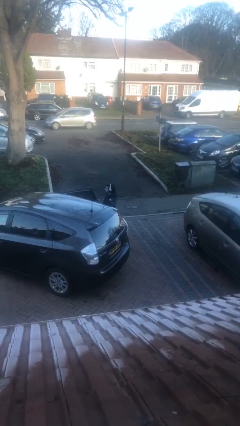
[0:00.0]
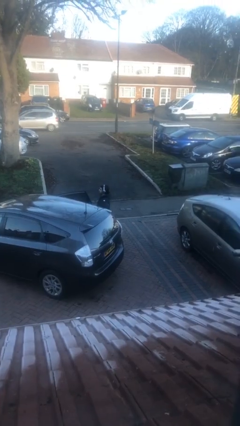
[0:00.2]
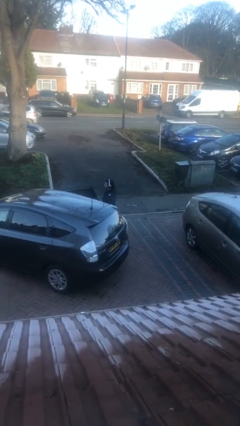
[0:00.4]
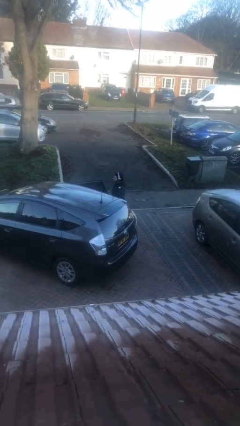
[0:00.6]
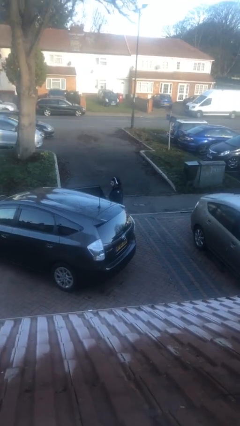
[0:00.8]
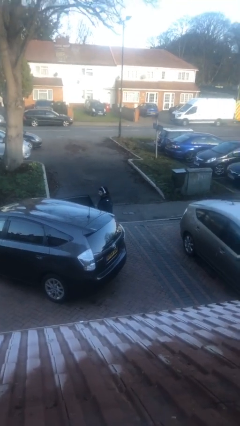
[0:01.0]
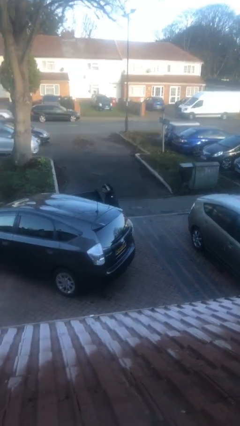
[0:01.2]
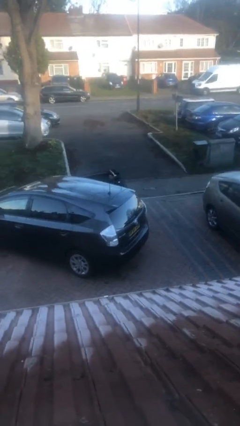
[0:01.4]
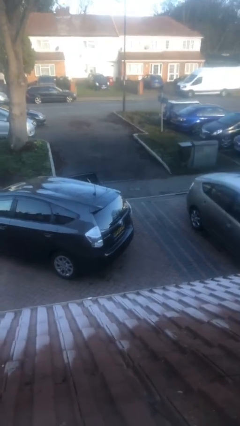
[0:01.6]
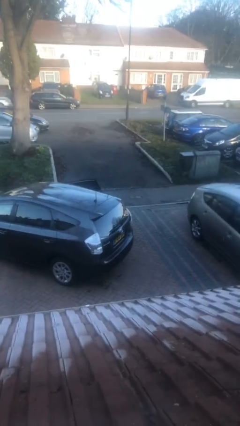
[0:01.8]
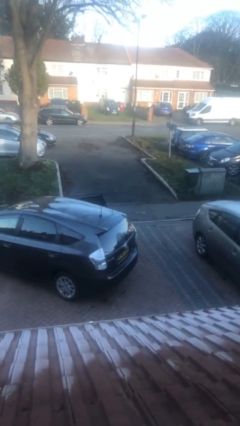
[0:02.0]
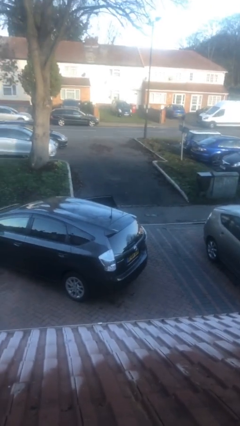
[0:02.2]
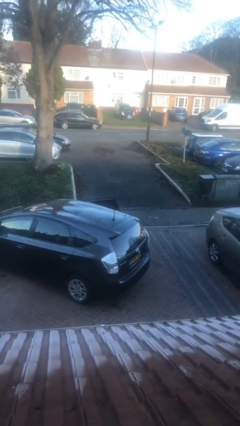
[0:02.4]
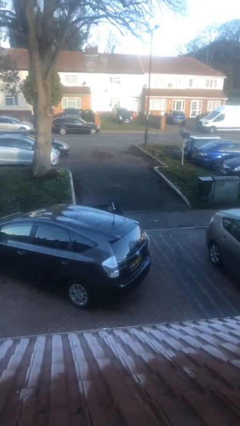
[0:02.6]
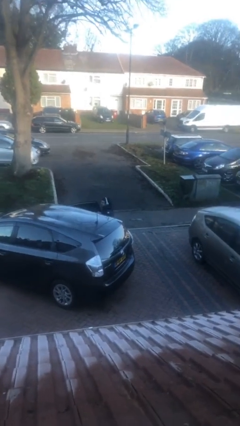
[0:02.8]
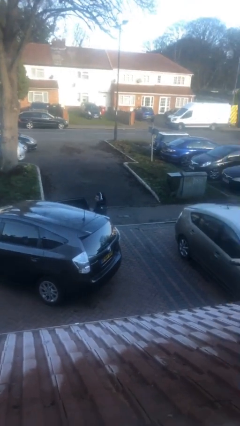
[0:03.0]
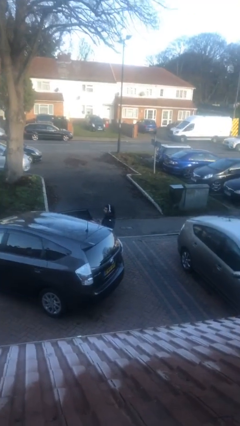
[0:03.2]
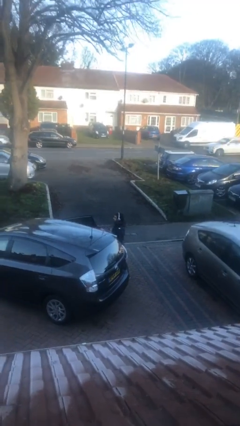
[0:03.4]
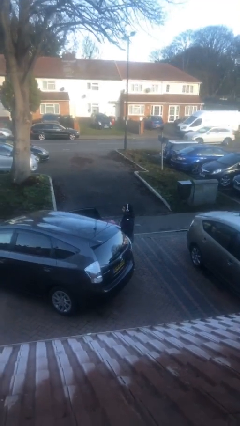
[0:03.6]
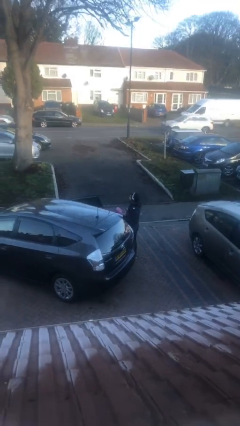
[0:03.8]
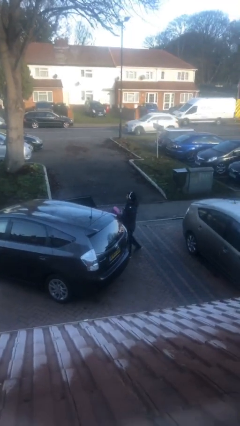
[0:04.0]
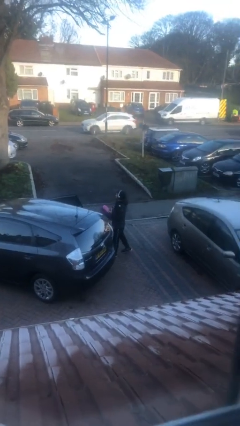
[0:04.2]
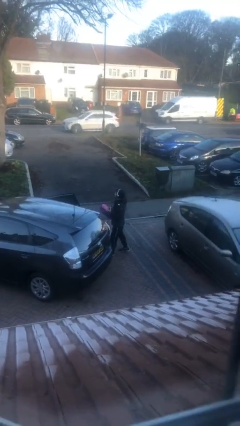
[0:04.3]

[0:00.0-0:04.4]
person unloads car

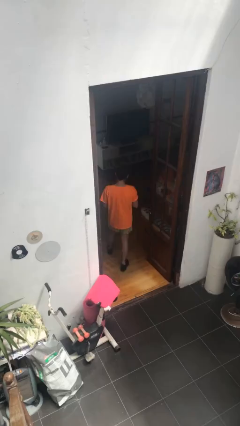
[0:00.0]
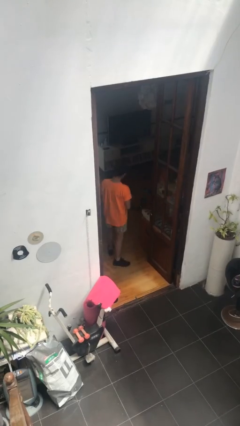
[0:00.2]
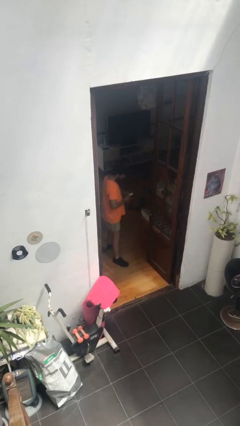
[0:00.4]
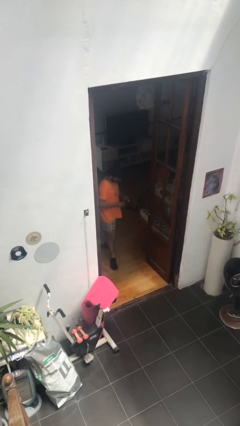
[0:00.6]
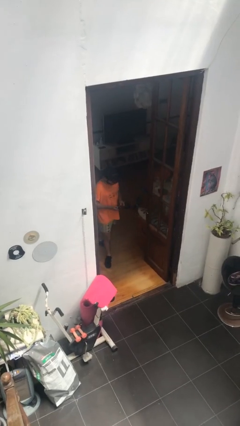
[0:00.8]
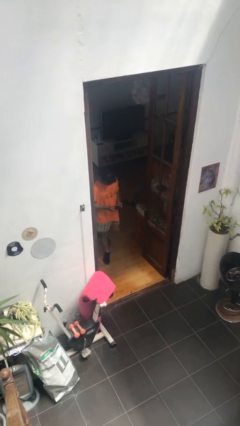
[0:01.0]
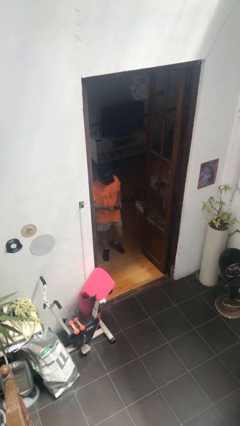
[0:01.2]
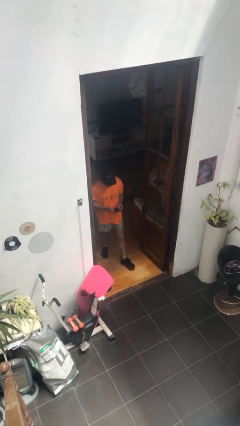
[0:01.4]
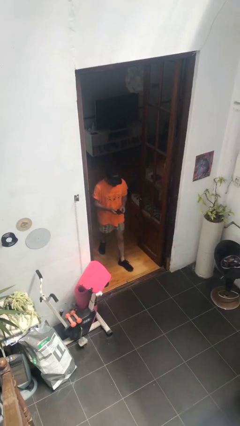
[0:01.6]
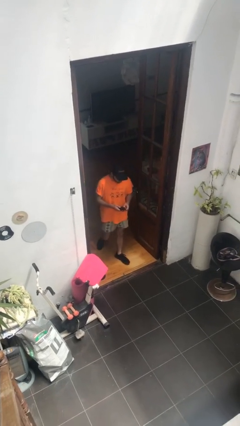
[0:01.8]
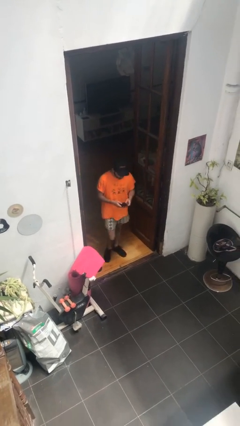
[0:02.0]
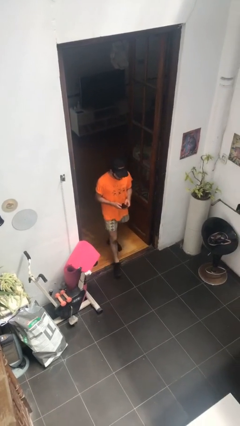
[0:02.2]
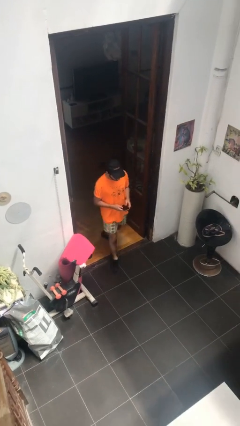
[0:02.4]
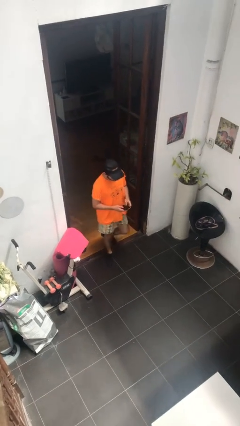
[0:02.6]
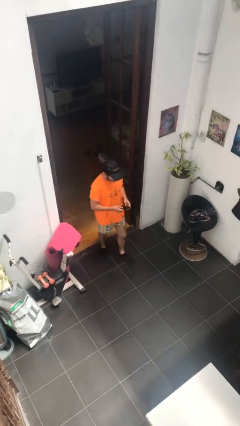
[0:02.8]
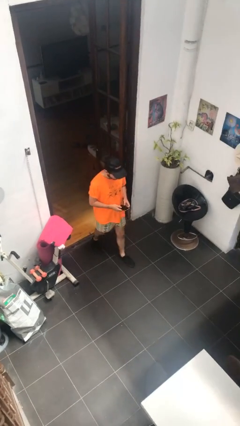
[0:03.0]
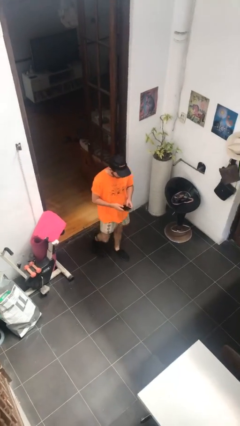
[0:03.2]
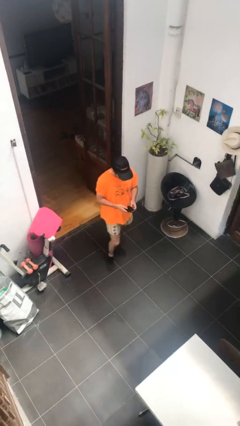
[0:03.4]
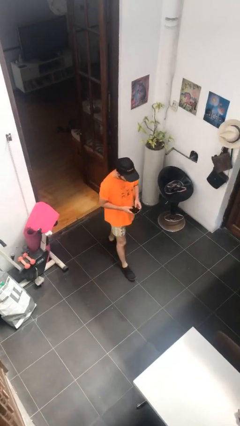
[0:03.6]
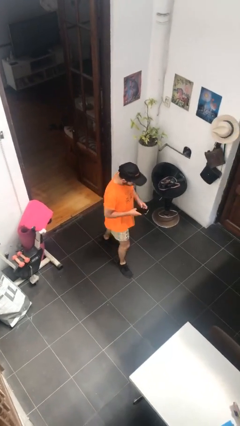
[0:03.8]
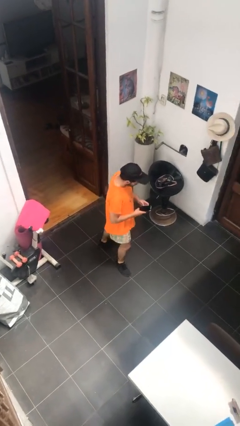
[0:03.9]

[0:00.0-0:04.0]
person enters scene through structure

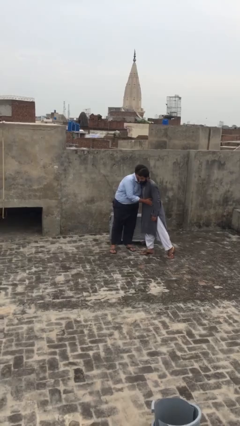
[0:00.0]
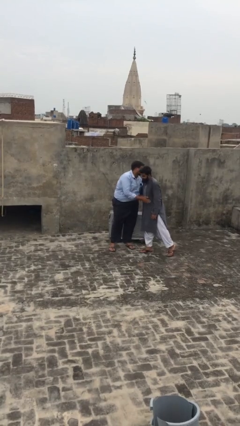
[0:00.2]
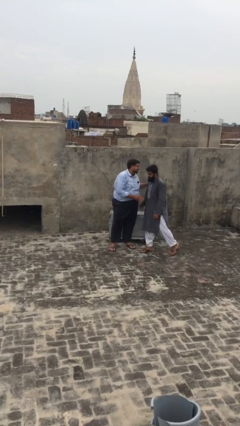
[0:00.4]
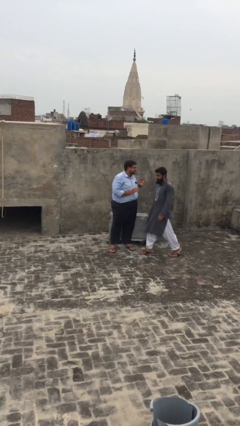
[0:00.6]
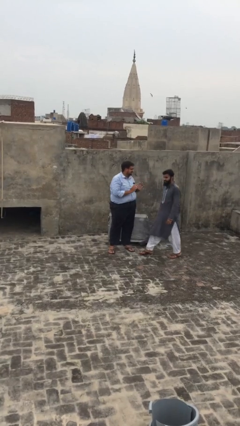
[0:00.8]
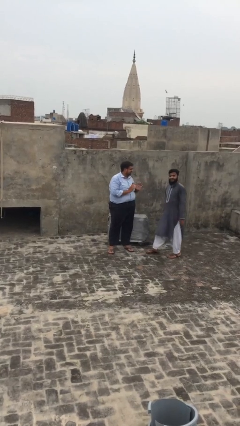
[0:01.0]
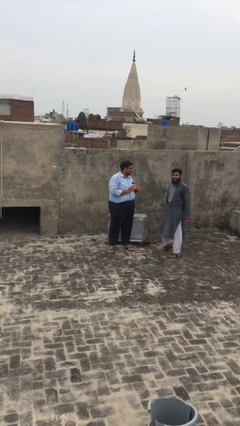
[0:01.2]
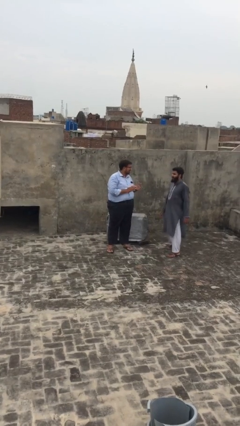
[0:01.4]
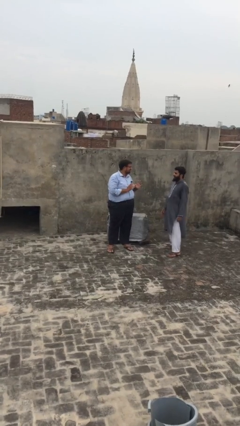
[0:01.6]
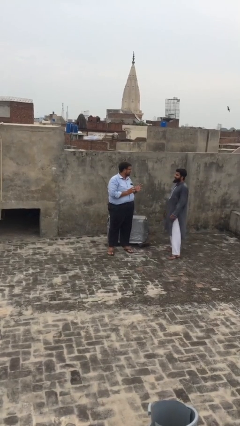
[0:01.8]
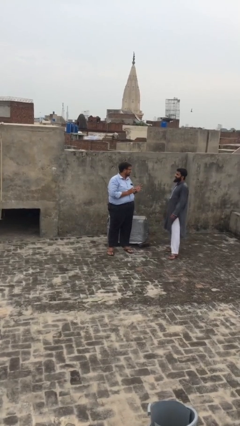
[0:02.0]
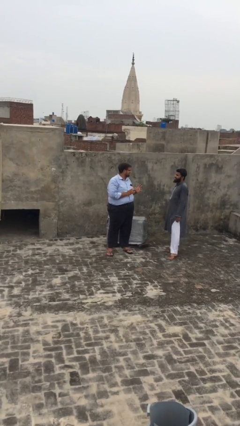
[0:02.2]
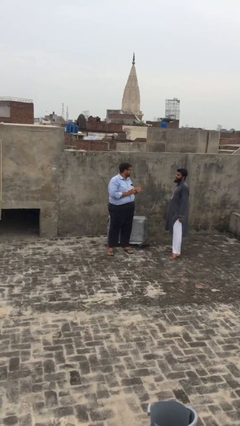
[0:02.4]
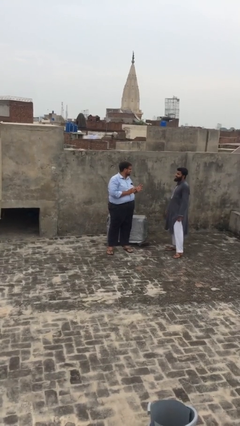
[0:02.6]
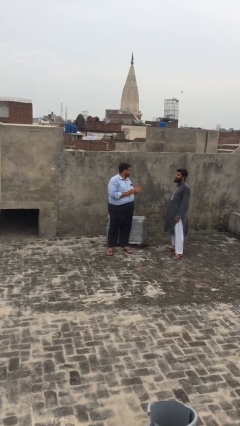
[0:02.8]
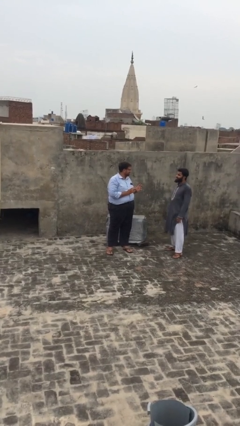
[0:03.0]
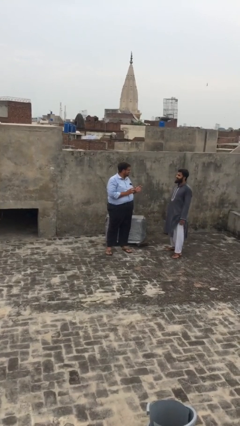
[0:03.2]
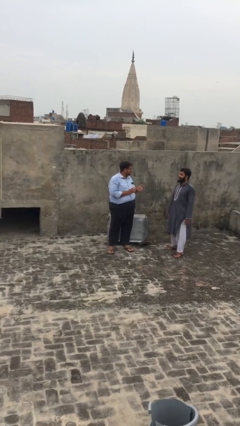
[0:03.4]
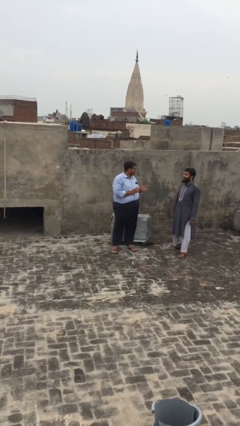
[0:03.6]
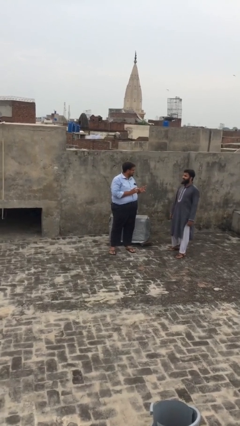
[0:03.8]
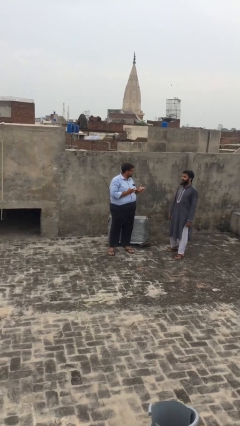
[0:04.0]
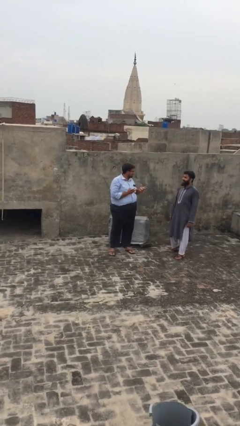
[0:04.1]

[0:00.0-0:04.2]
person talks to person

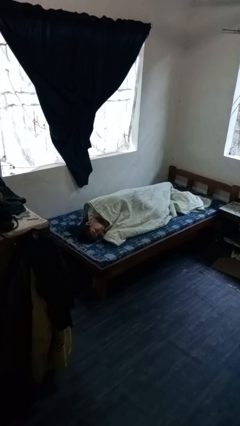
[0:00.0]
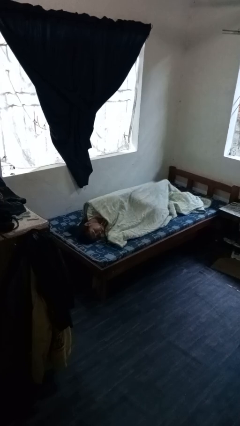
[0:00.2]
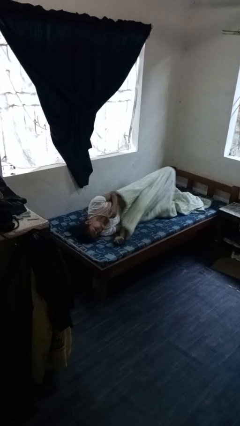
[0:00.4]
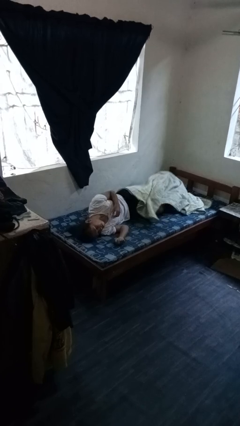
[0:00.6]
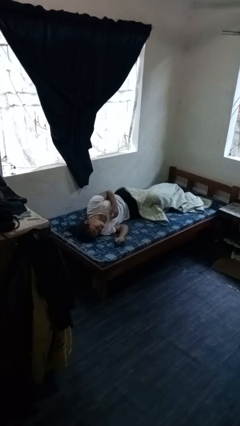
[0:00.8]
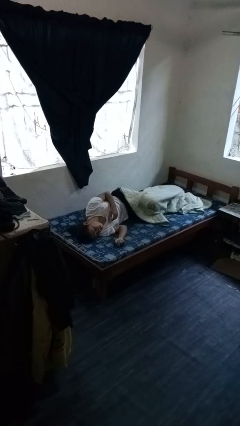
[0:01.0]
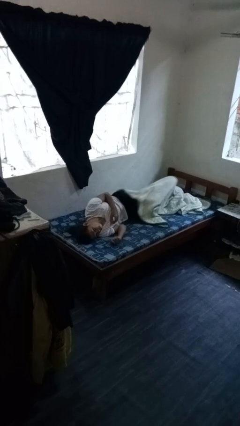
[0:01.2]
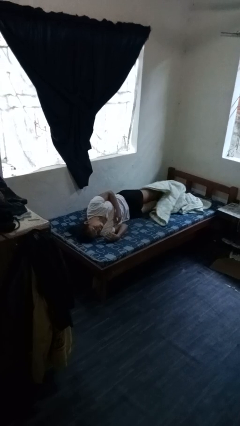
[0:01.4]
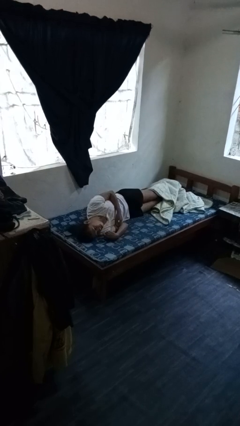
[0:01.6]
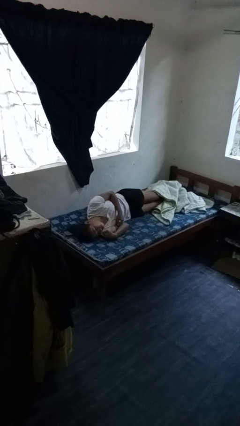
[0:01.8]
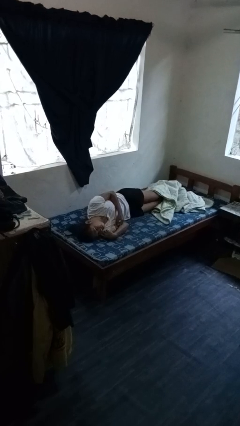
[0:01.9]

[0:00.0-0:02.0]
person uncovers with bedsheets

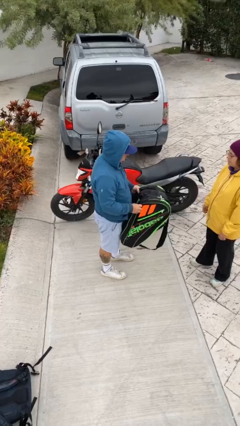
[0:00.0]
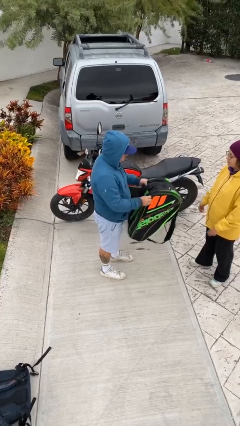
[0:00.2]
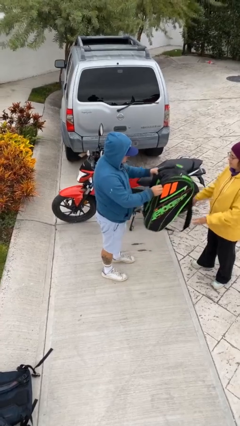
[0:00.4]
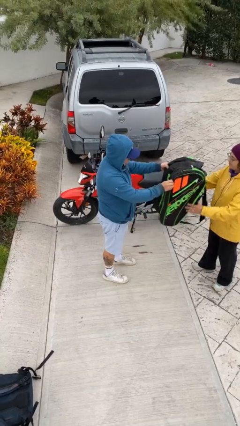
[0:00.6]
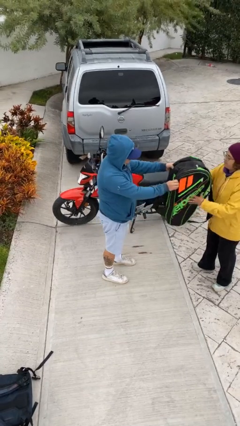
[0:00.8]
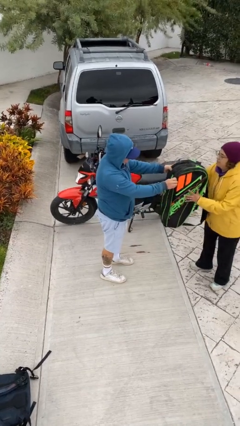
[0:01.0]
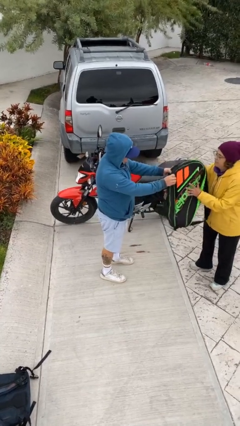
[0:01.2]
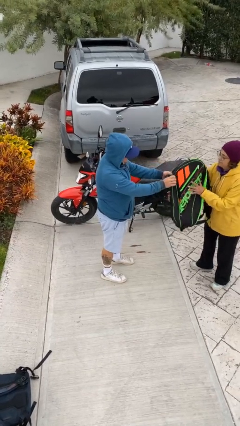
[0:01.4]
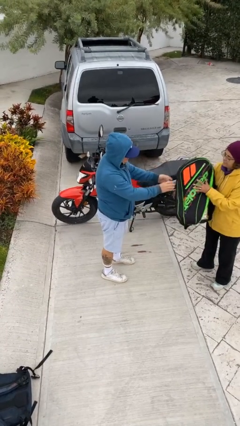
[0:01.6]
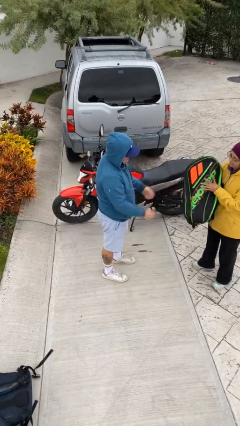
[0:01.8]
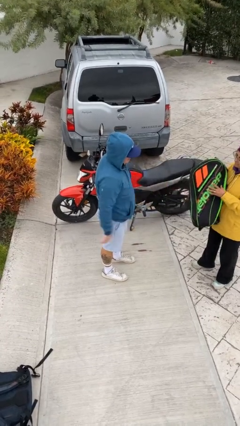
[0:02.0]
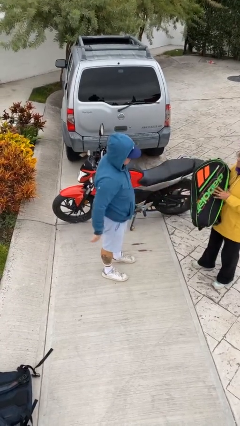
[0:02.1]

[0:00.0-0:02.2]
person transfers object to person

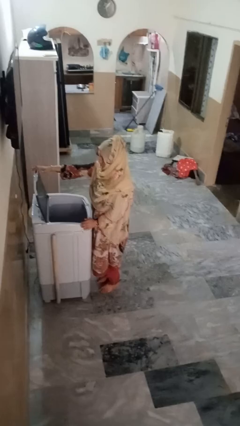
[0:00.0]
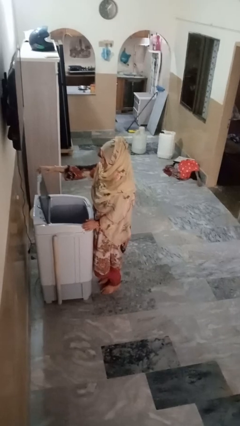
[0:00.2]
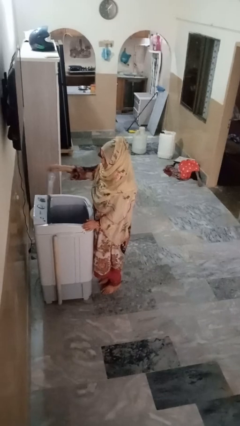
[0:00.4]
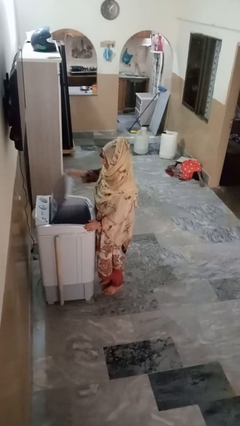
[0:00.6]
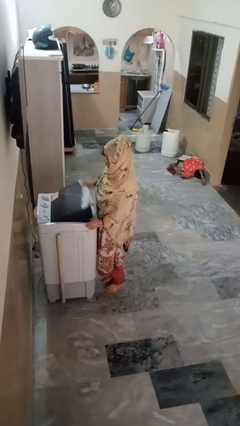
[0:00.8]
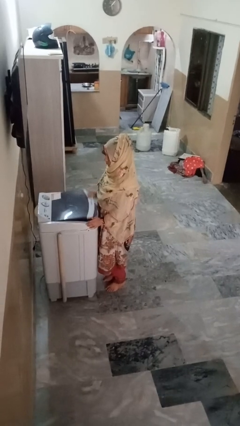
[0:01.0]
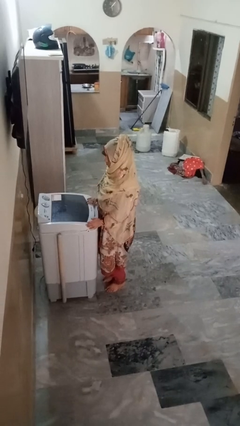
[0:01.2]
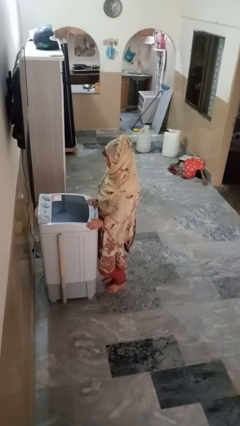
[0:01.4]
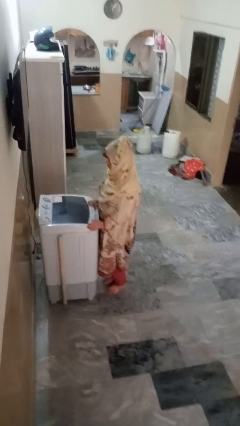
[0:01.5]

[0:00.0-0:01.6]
person closes clothes washer
